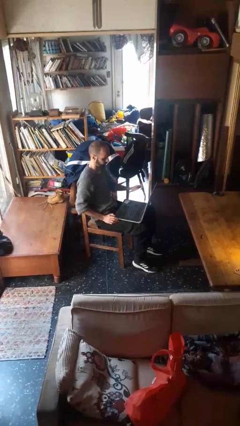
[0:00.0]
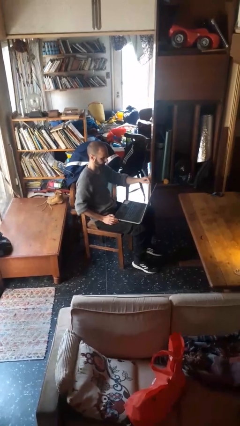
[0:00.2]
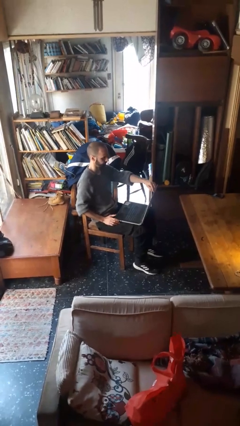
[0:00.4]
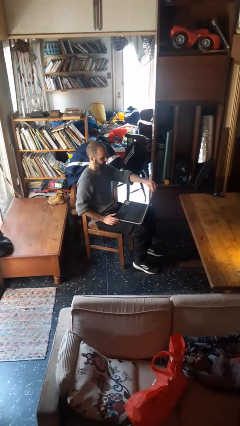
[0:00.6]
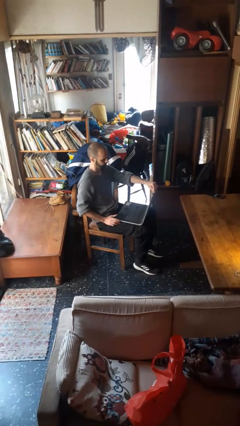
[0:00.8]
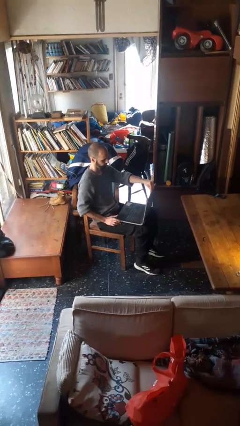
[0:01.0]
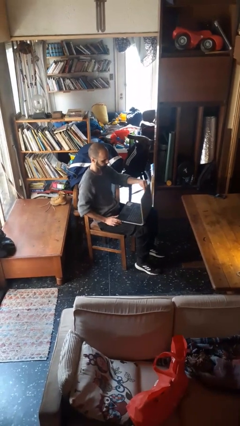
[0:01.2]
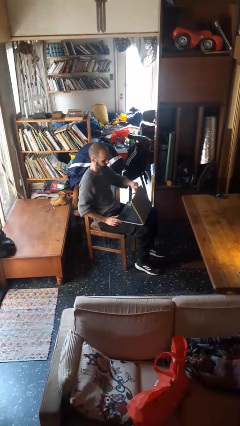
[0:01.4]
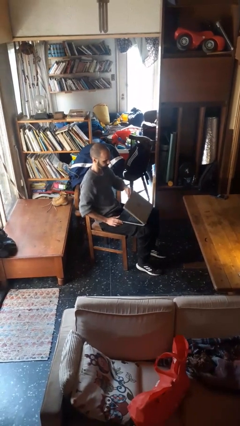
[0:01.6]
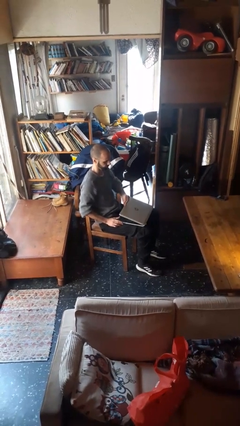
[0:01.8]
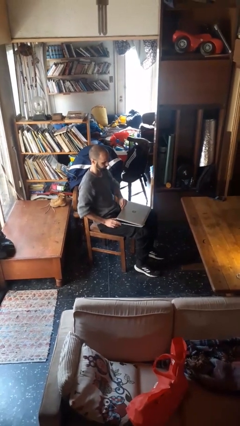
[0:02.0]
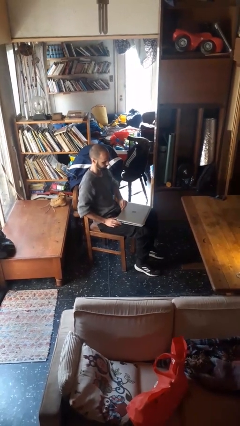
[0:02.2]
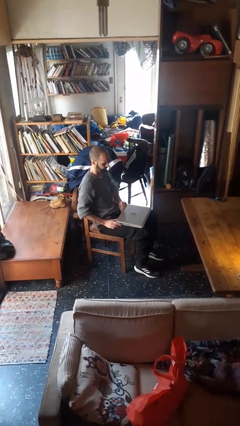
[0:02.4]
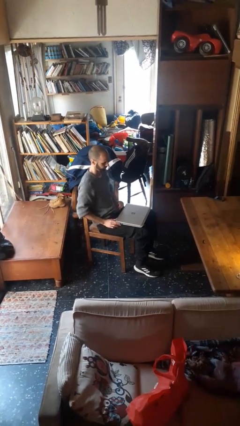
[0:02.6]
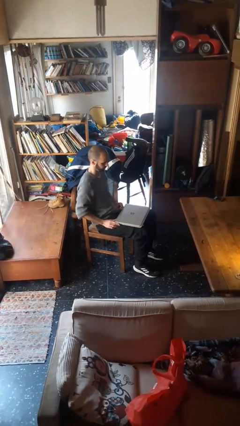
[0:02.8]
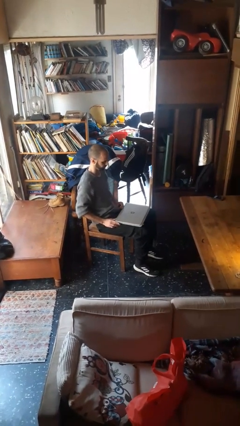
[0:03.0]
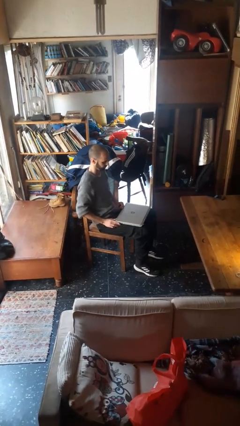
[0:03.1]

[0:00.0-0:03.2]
person closes laptop

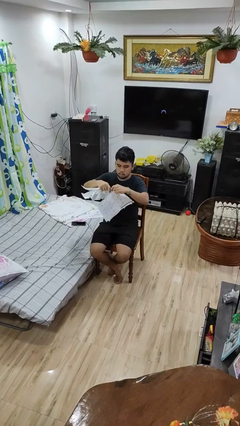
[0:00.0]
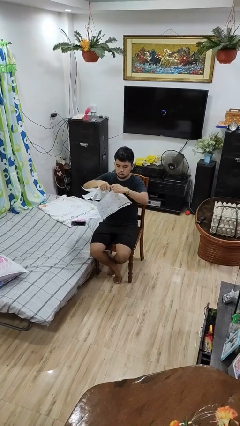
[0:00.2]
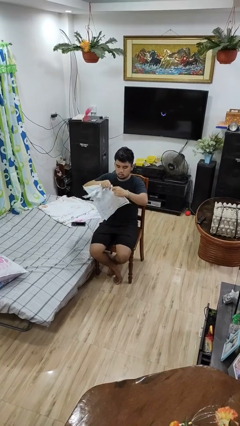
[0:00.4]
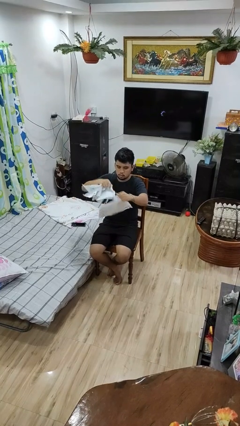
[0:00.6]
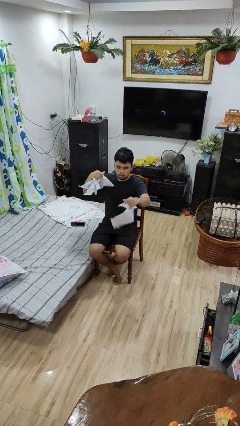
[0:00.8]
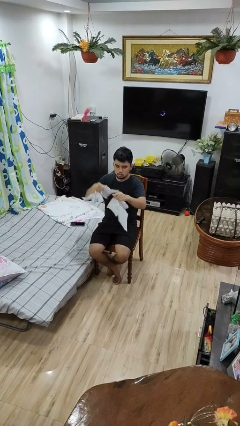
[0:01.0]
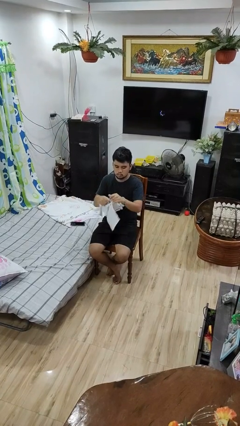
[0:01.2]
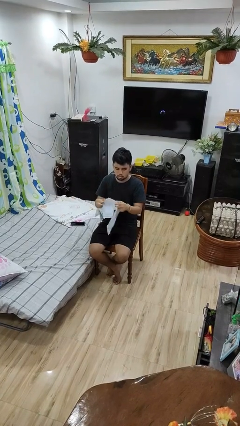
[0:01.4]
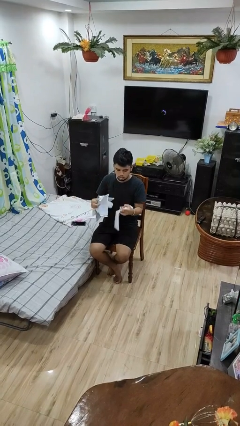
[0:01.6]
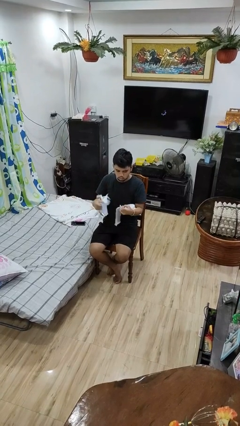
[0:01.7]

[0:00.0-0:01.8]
person tears paper

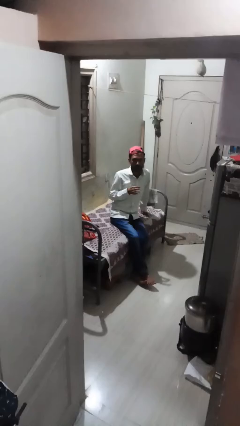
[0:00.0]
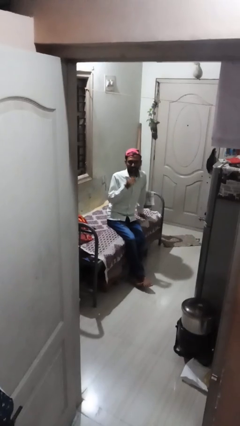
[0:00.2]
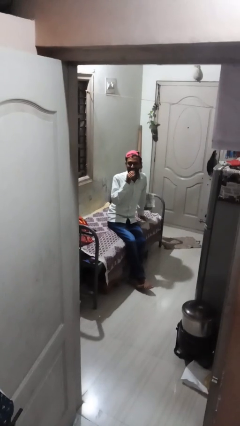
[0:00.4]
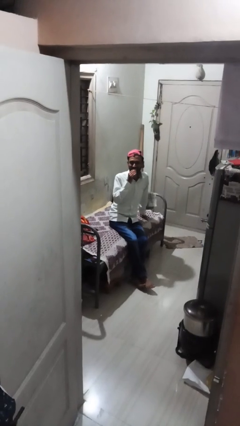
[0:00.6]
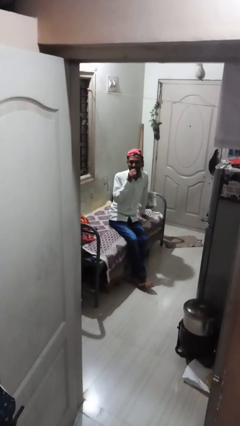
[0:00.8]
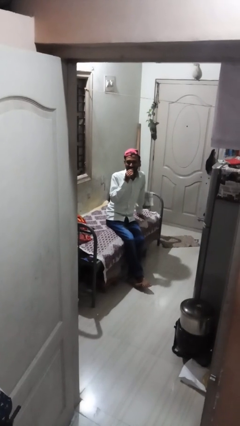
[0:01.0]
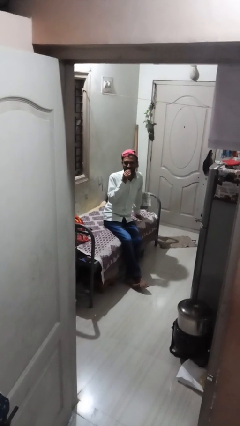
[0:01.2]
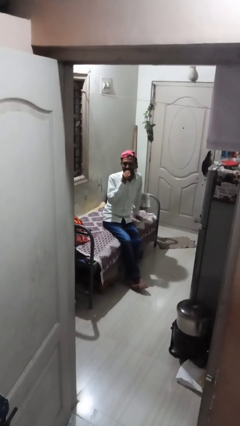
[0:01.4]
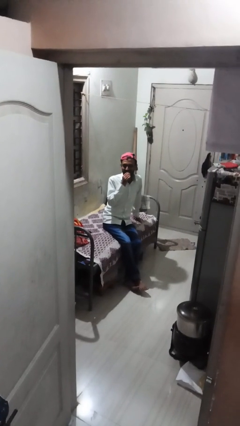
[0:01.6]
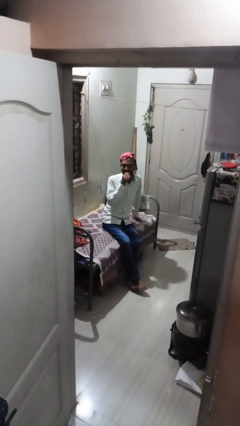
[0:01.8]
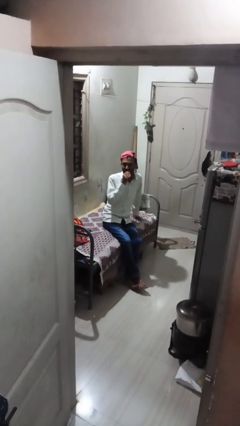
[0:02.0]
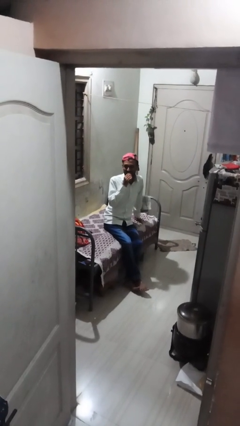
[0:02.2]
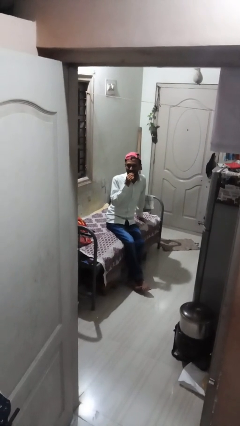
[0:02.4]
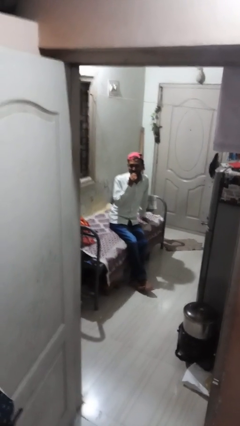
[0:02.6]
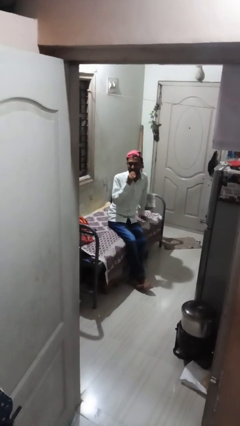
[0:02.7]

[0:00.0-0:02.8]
person flosses

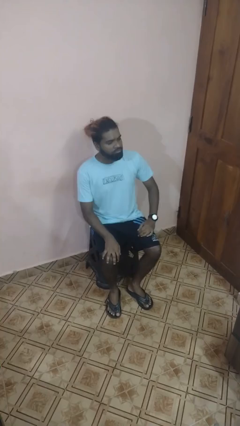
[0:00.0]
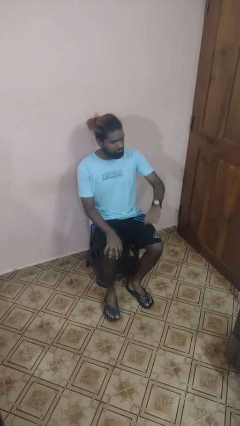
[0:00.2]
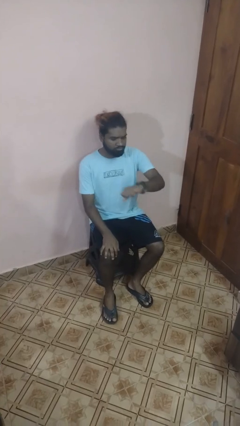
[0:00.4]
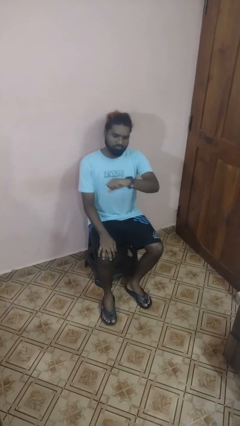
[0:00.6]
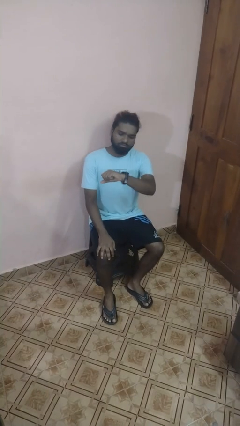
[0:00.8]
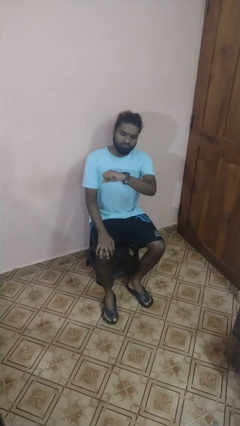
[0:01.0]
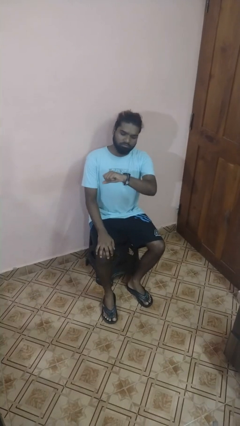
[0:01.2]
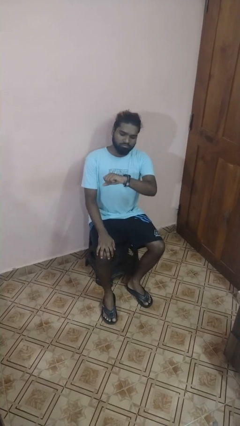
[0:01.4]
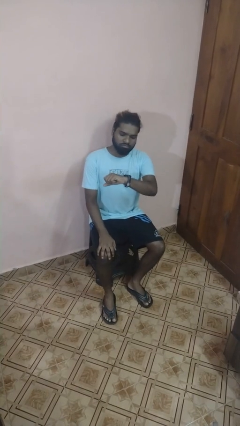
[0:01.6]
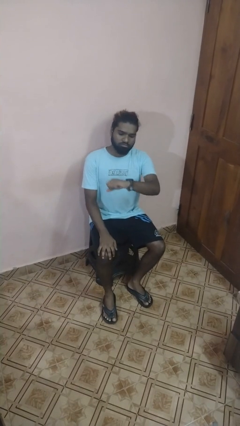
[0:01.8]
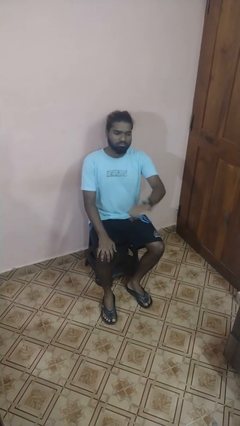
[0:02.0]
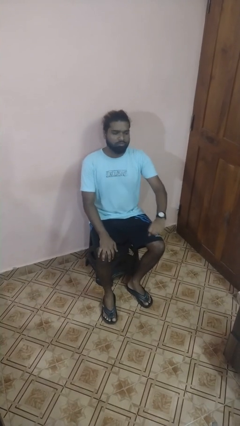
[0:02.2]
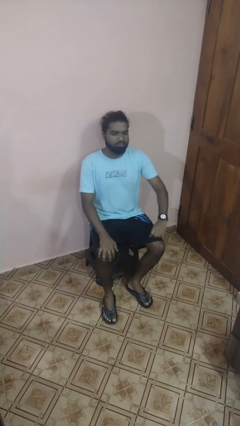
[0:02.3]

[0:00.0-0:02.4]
person looks at wristwatch

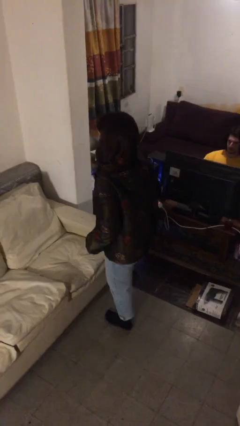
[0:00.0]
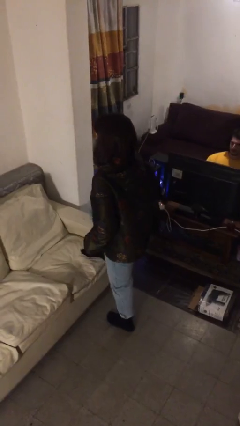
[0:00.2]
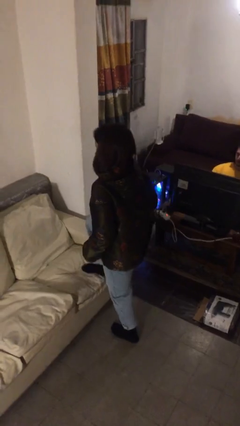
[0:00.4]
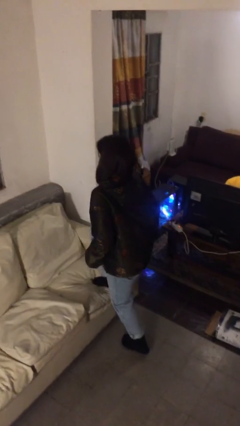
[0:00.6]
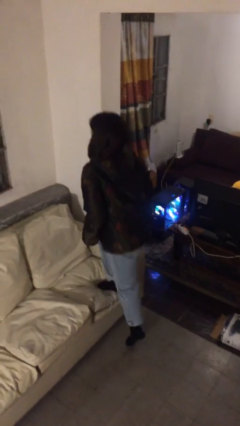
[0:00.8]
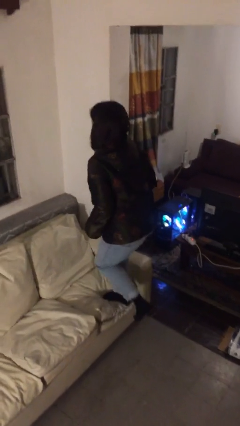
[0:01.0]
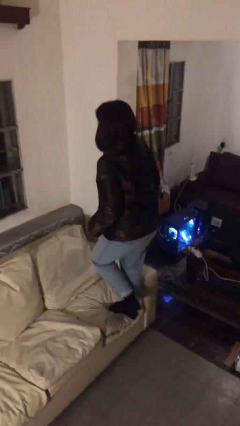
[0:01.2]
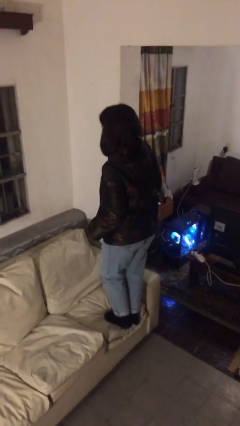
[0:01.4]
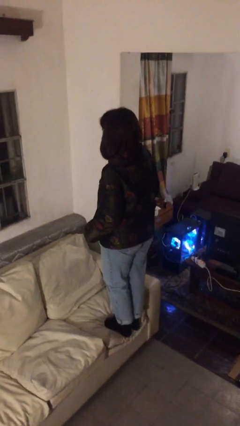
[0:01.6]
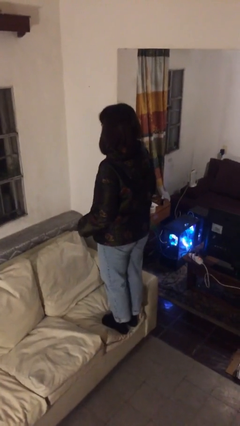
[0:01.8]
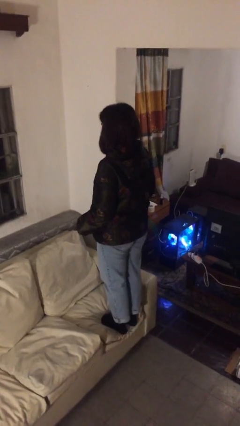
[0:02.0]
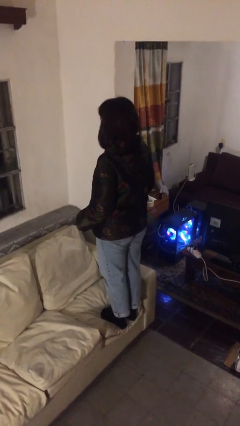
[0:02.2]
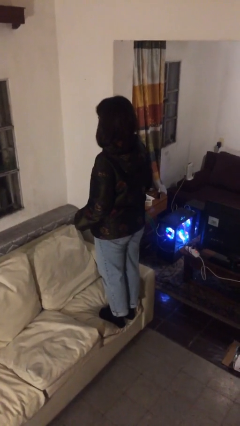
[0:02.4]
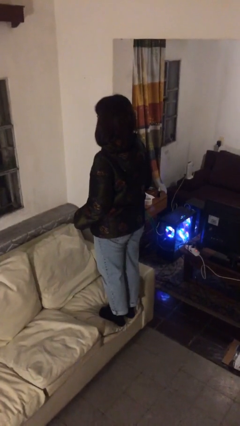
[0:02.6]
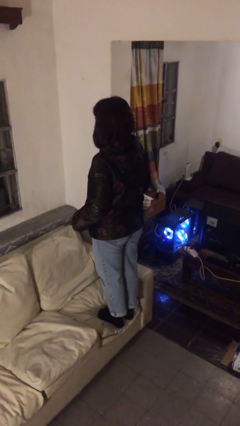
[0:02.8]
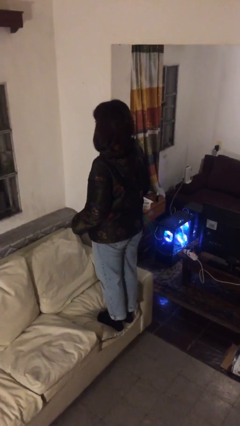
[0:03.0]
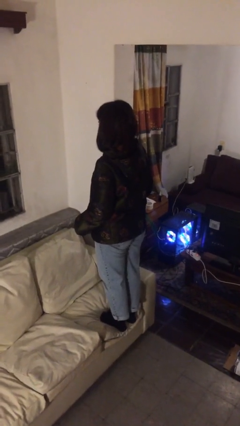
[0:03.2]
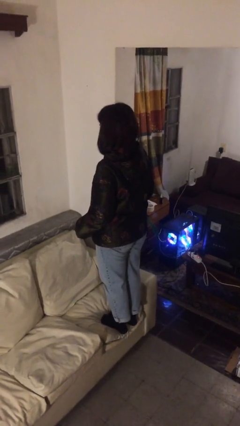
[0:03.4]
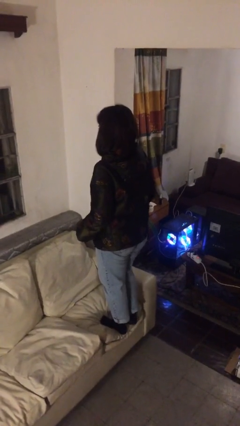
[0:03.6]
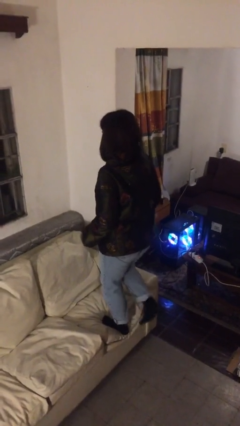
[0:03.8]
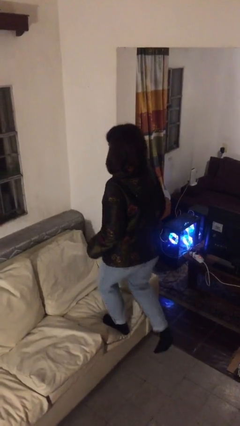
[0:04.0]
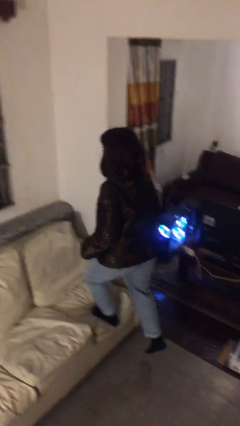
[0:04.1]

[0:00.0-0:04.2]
person climbs on couch

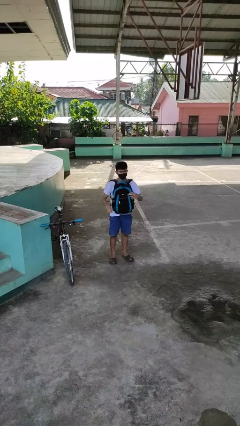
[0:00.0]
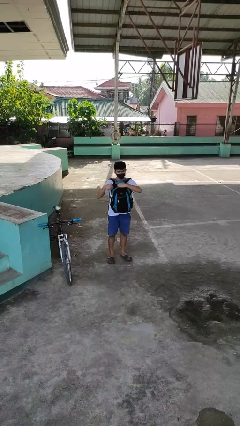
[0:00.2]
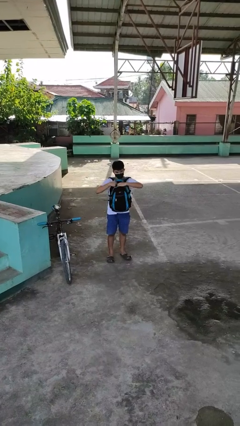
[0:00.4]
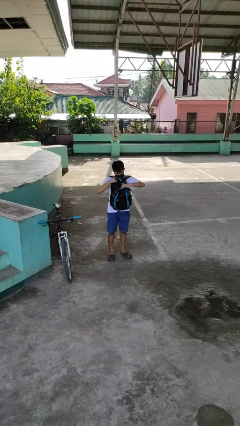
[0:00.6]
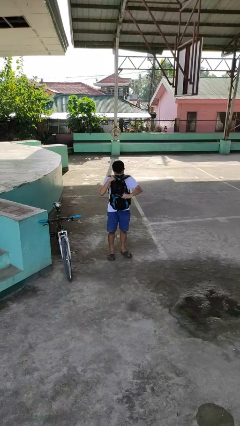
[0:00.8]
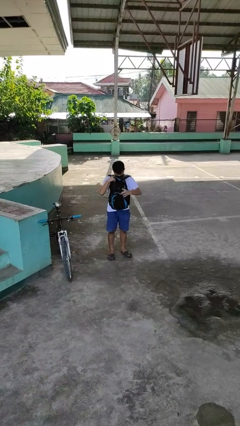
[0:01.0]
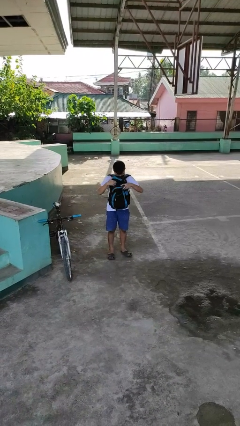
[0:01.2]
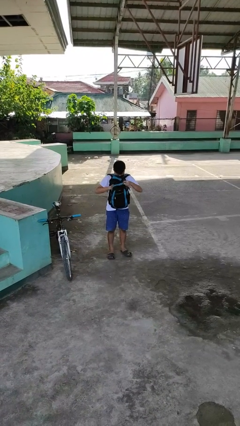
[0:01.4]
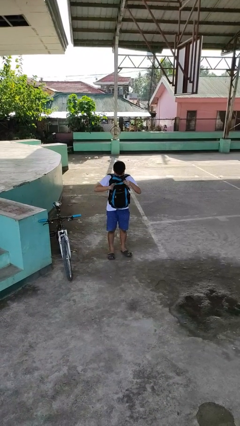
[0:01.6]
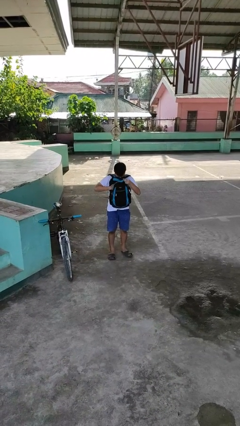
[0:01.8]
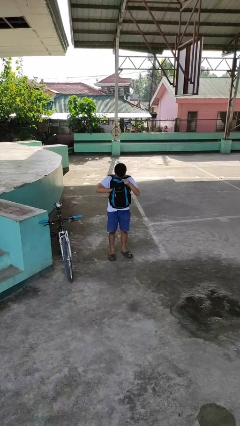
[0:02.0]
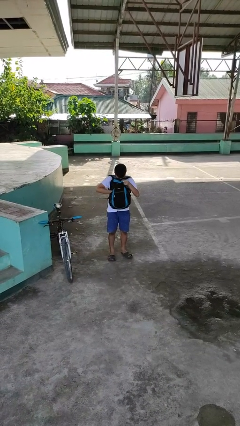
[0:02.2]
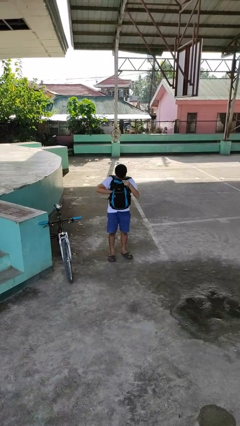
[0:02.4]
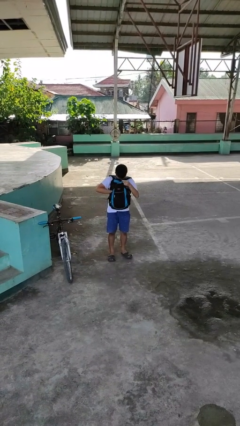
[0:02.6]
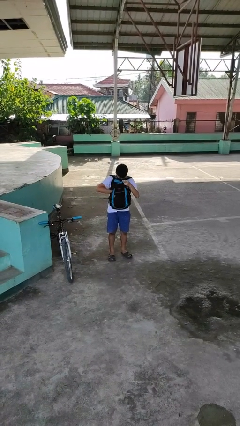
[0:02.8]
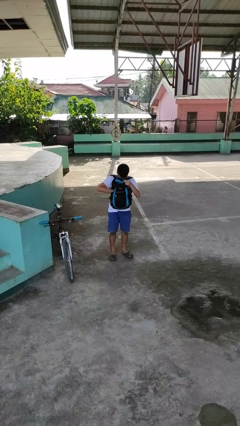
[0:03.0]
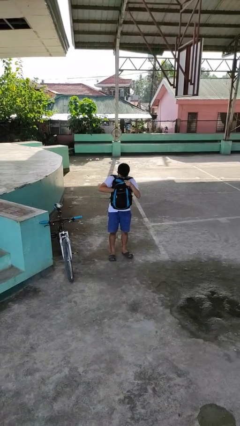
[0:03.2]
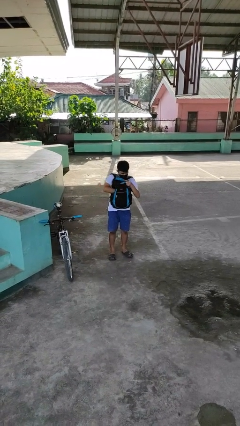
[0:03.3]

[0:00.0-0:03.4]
person searches in backpack
